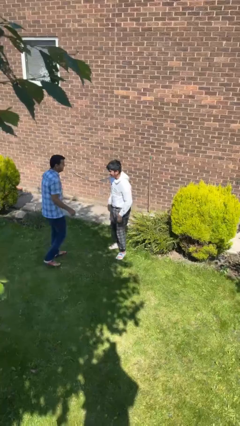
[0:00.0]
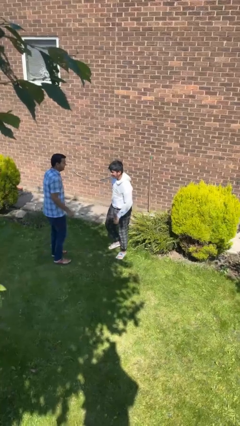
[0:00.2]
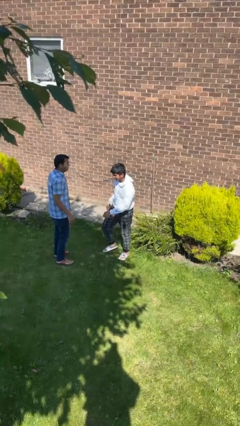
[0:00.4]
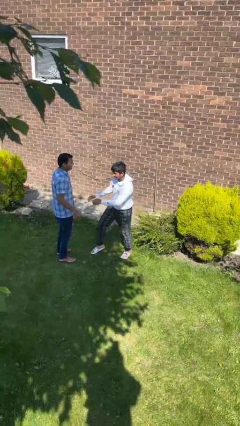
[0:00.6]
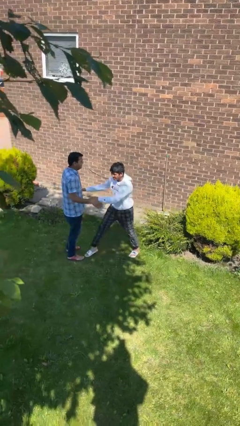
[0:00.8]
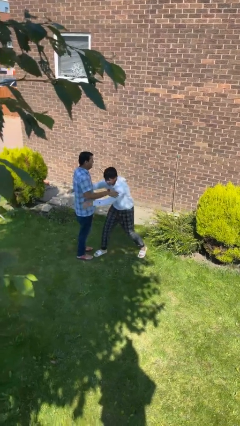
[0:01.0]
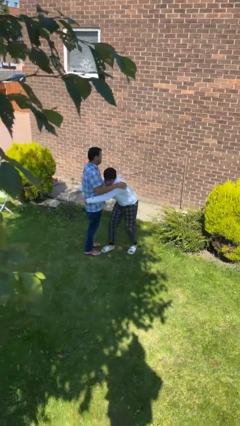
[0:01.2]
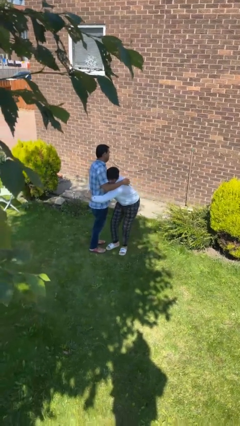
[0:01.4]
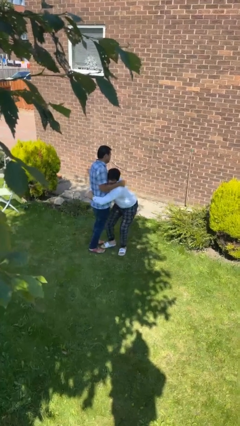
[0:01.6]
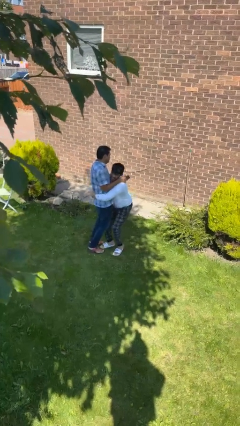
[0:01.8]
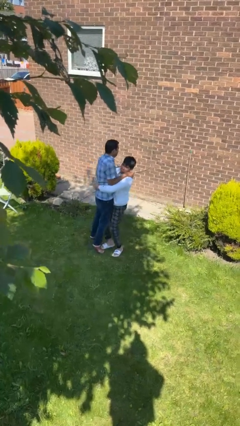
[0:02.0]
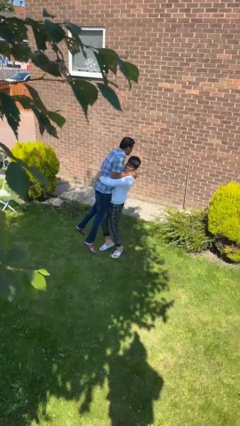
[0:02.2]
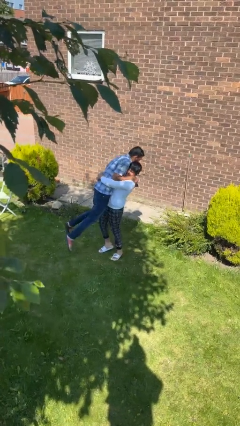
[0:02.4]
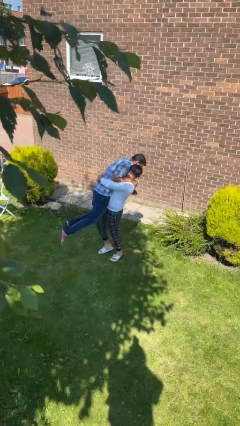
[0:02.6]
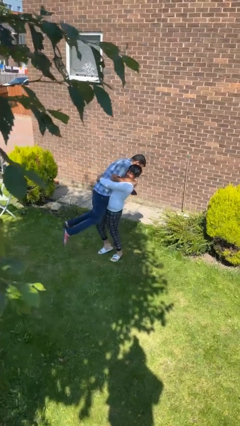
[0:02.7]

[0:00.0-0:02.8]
person picks up person

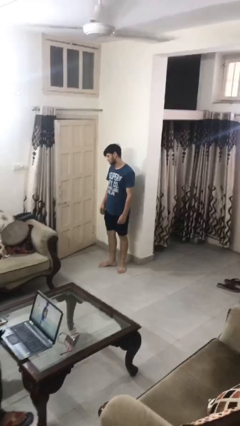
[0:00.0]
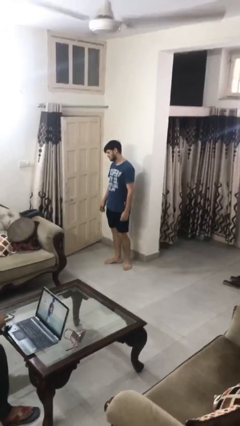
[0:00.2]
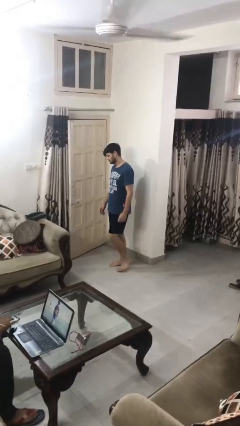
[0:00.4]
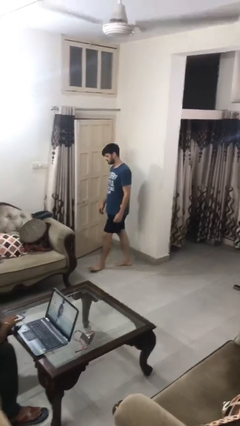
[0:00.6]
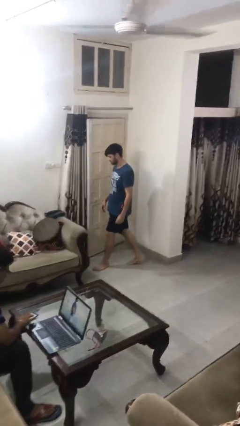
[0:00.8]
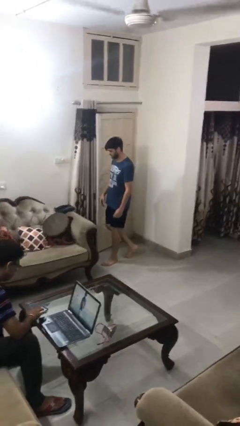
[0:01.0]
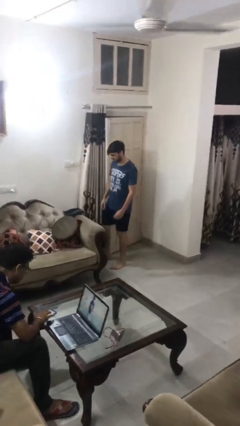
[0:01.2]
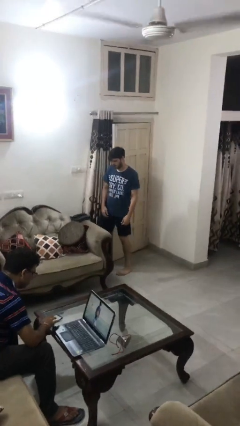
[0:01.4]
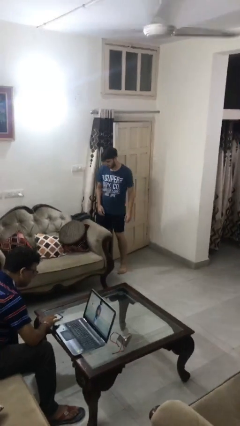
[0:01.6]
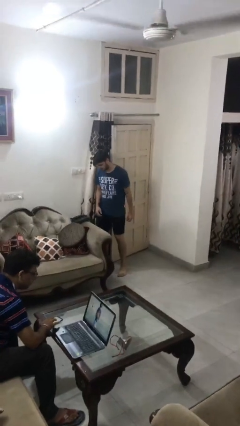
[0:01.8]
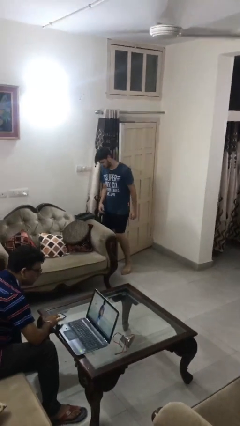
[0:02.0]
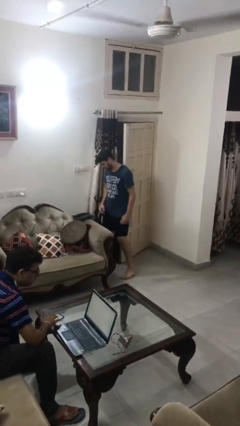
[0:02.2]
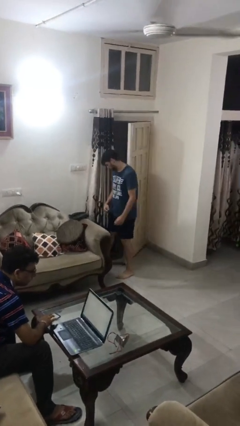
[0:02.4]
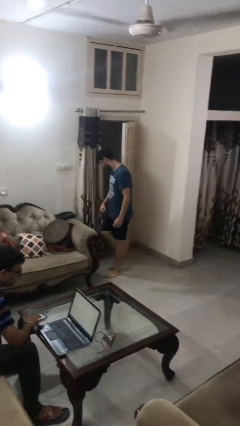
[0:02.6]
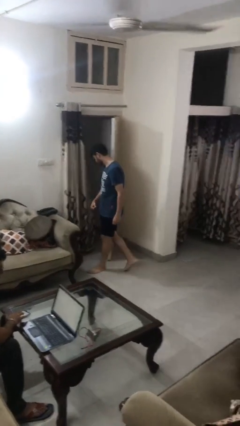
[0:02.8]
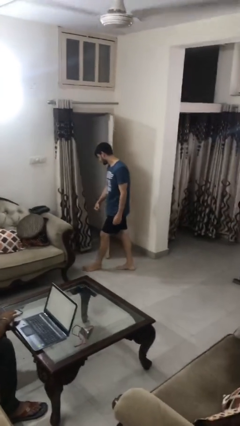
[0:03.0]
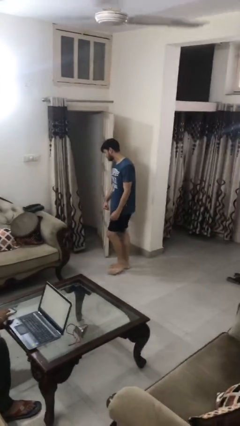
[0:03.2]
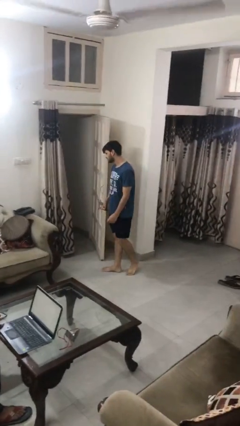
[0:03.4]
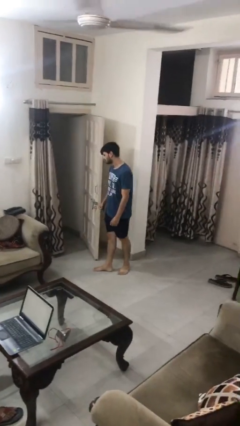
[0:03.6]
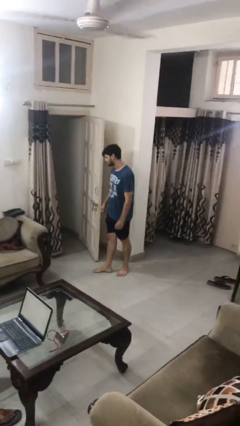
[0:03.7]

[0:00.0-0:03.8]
person opens facility door

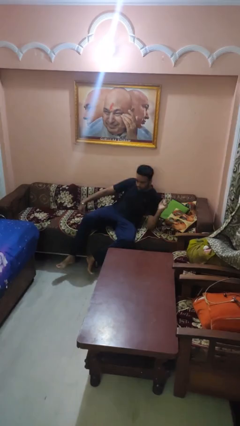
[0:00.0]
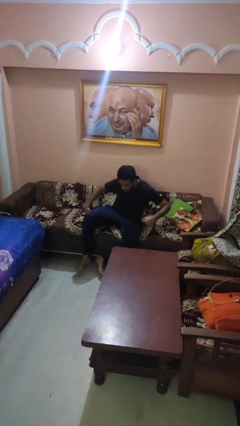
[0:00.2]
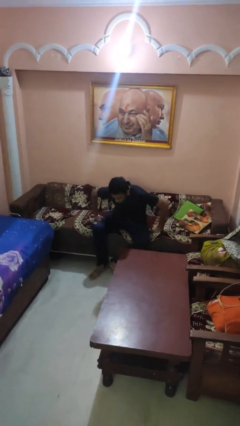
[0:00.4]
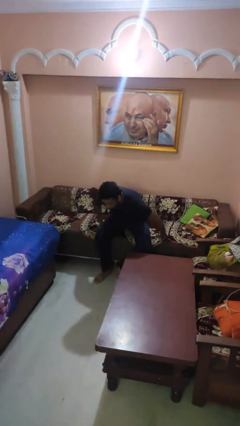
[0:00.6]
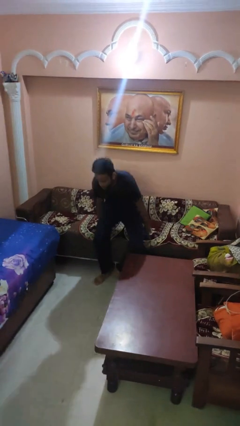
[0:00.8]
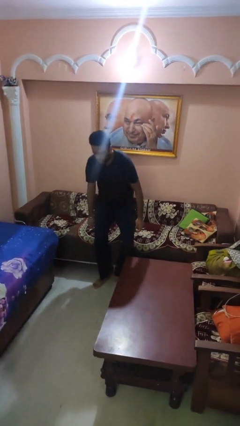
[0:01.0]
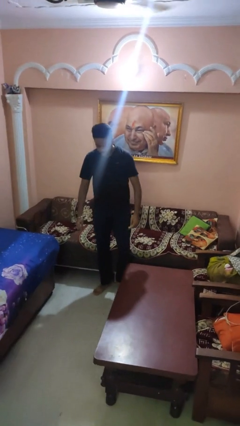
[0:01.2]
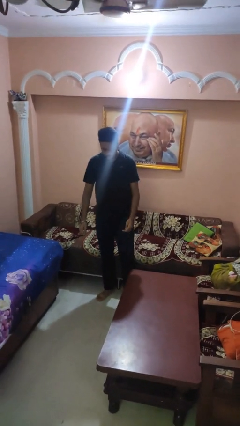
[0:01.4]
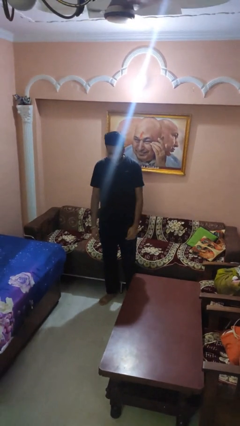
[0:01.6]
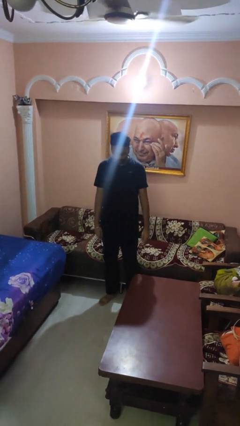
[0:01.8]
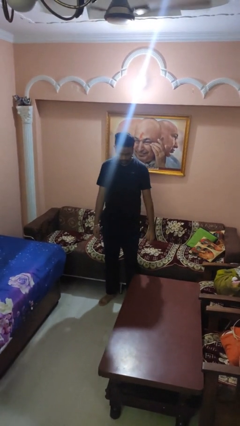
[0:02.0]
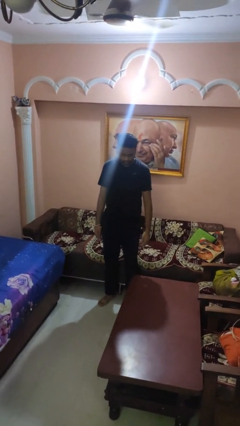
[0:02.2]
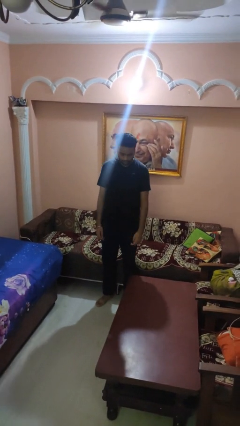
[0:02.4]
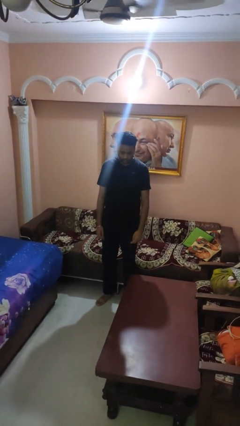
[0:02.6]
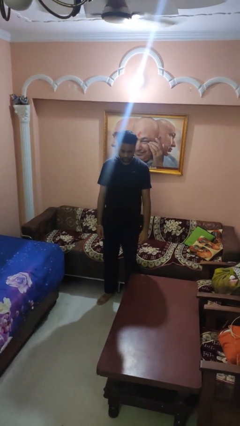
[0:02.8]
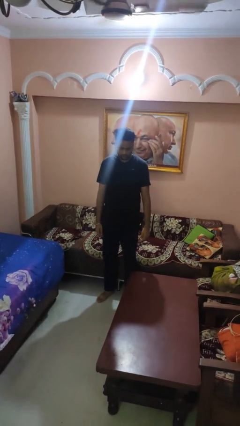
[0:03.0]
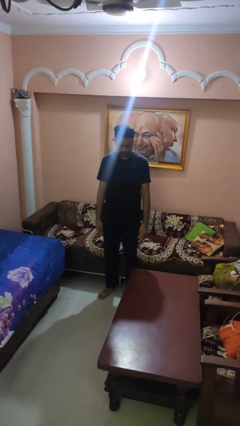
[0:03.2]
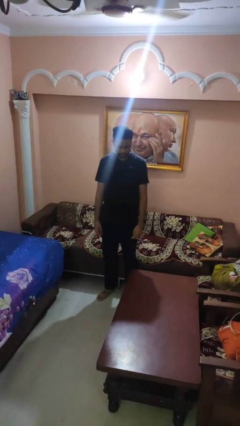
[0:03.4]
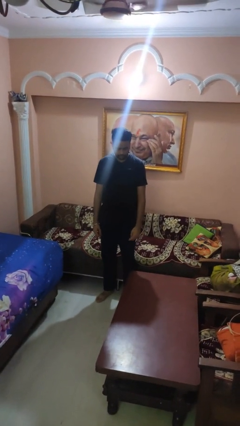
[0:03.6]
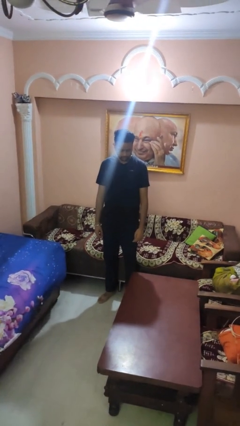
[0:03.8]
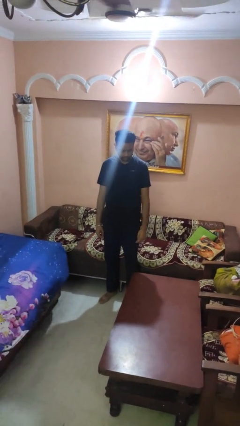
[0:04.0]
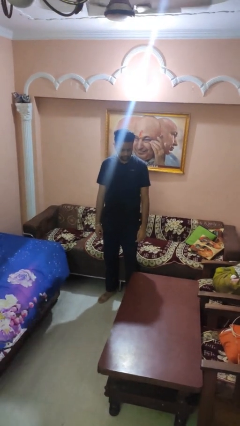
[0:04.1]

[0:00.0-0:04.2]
person stands up

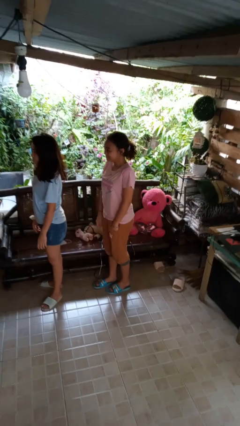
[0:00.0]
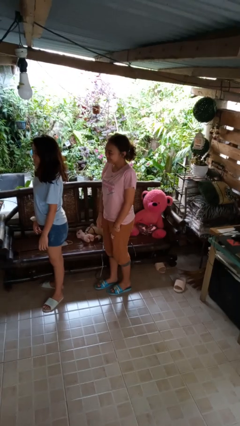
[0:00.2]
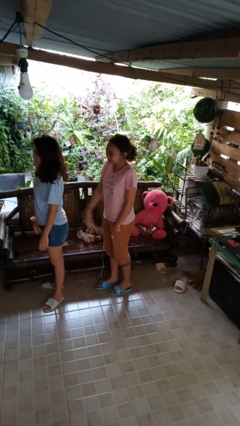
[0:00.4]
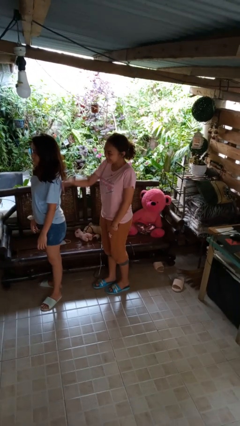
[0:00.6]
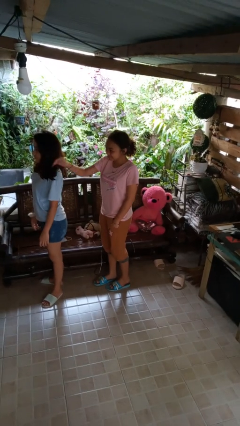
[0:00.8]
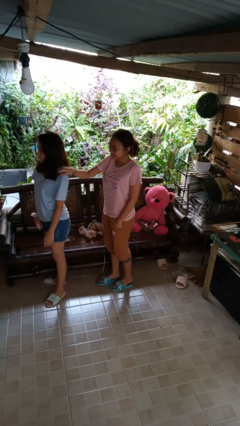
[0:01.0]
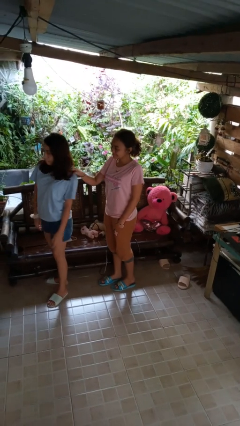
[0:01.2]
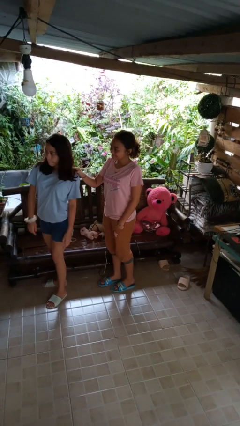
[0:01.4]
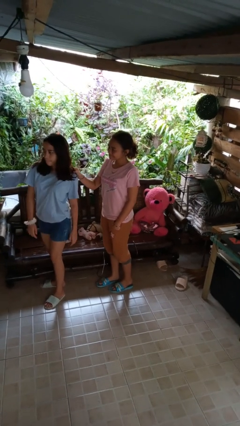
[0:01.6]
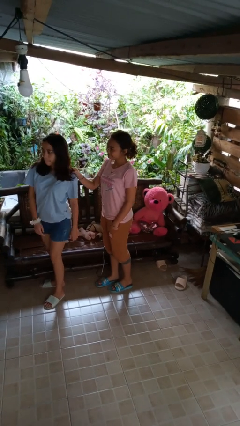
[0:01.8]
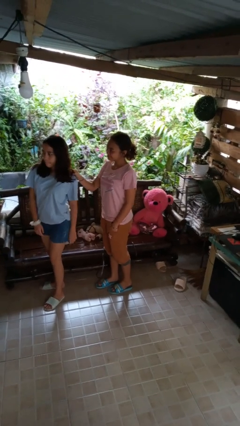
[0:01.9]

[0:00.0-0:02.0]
person grabs person by shoulder

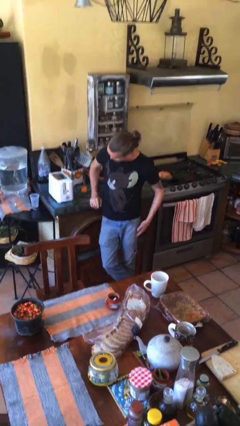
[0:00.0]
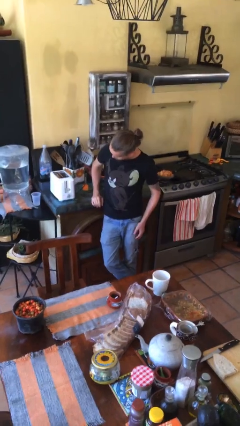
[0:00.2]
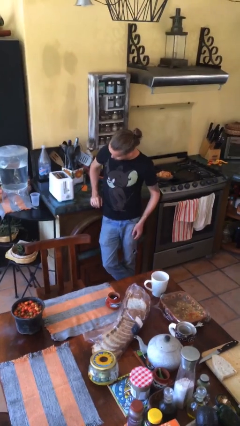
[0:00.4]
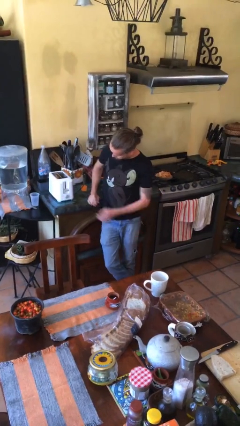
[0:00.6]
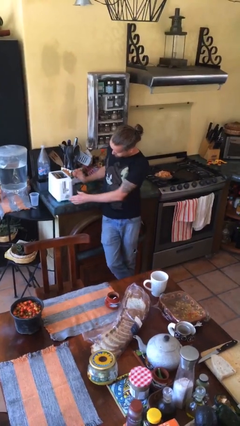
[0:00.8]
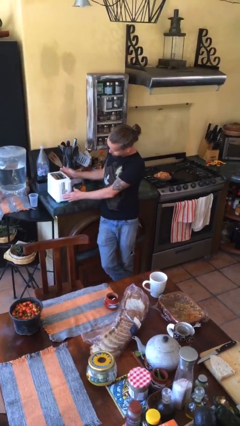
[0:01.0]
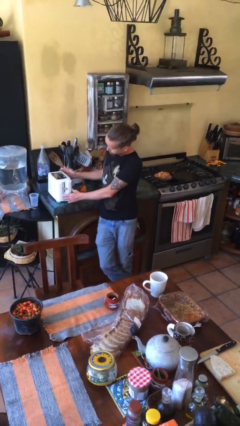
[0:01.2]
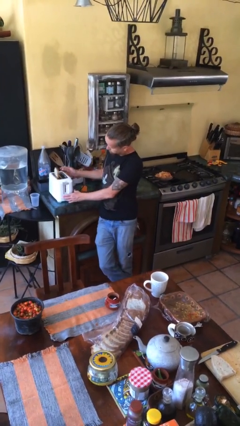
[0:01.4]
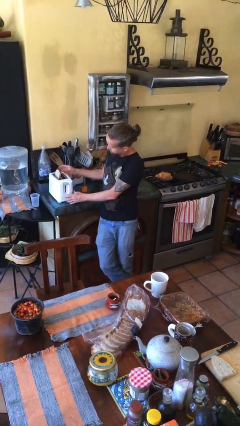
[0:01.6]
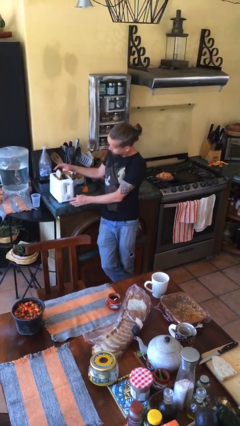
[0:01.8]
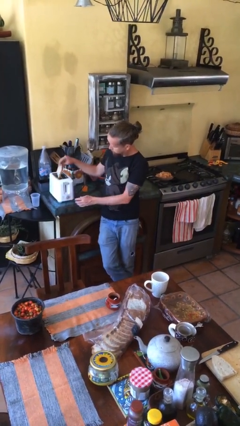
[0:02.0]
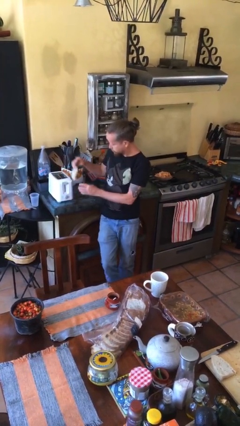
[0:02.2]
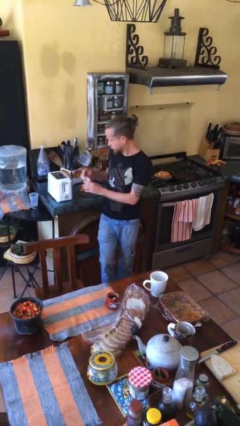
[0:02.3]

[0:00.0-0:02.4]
person takes object from toaster

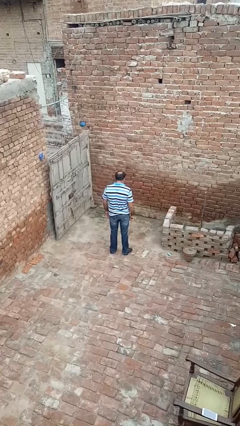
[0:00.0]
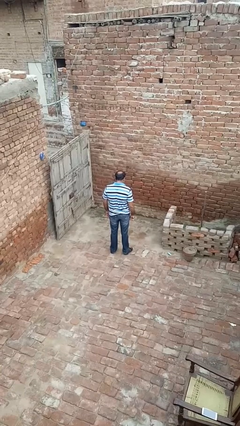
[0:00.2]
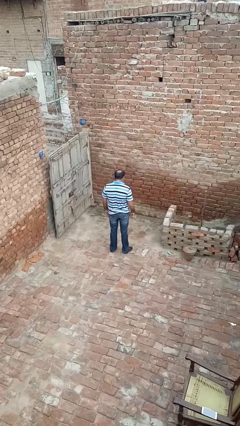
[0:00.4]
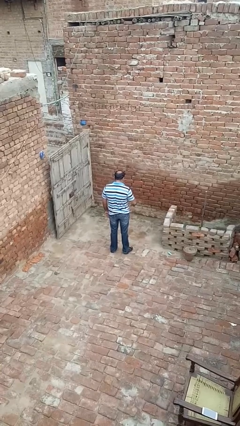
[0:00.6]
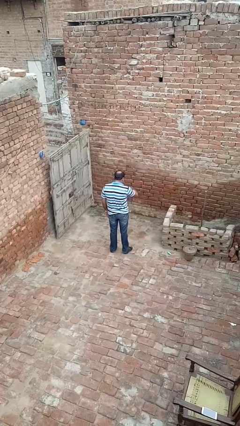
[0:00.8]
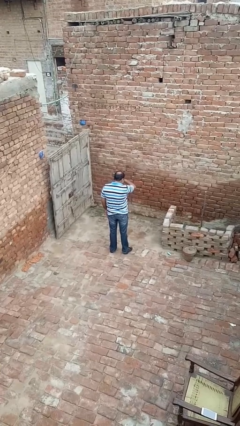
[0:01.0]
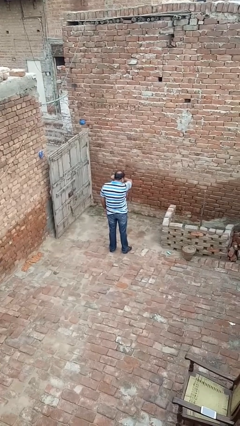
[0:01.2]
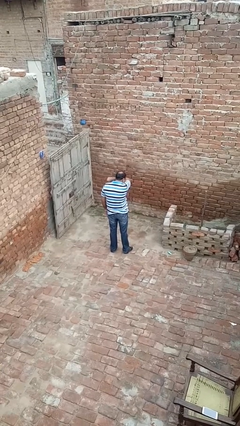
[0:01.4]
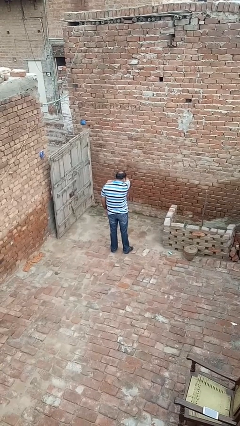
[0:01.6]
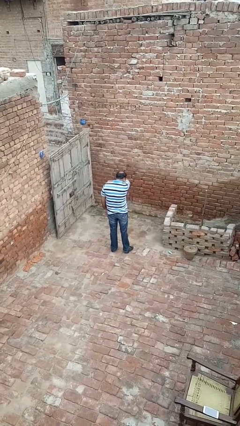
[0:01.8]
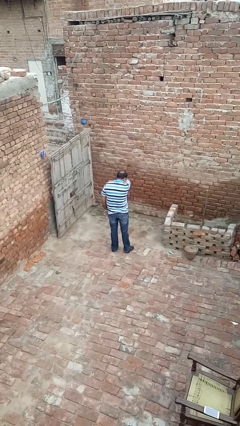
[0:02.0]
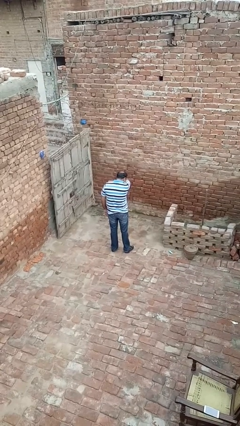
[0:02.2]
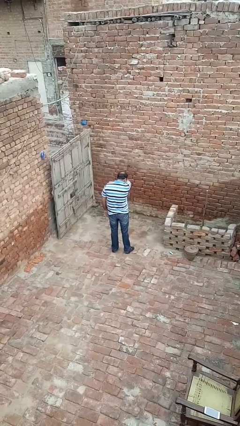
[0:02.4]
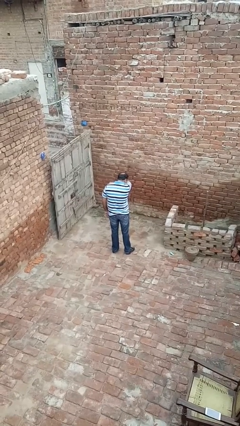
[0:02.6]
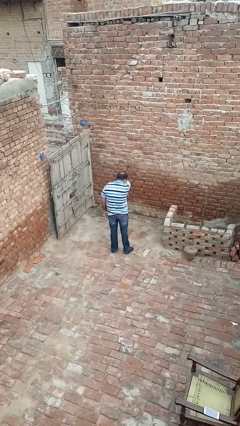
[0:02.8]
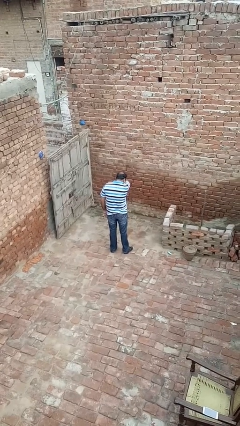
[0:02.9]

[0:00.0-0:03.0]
person sneezes into arm
